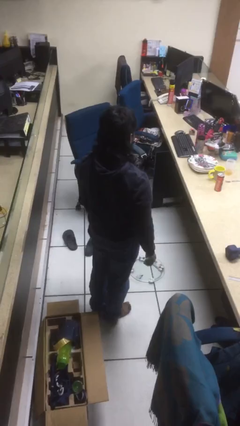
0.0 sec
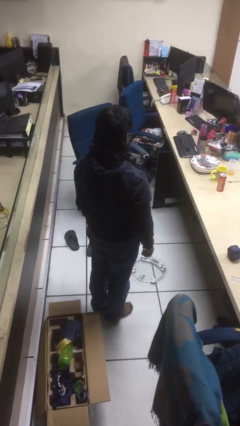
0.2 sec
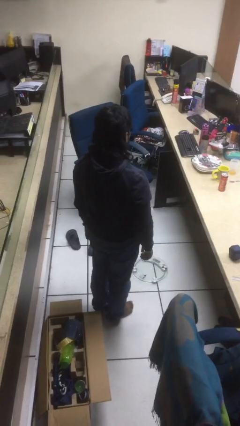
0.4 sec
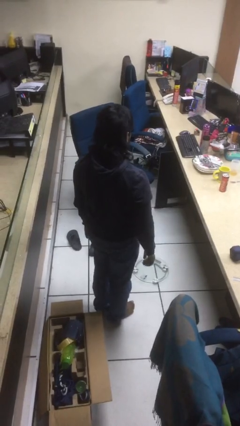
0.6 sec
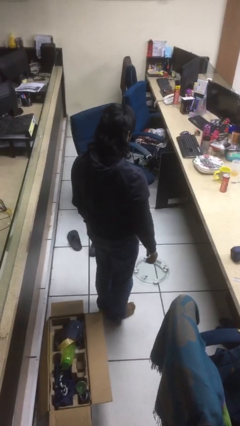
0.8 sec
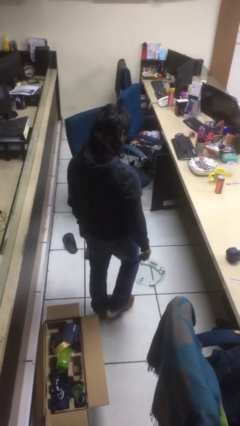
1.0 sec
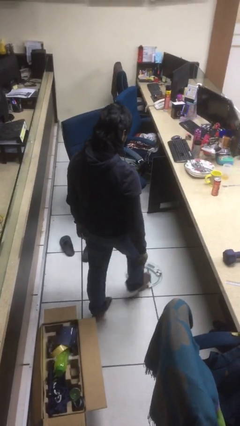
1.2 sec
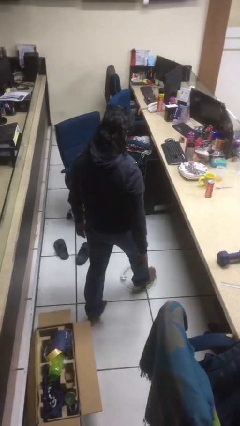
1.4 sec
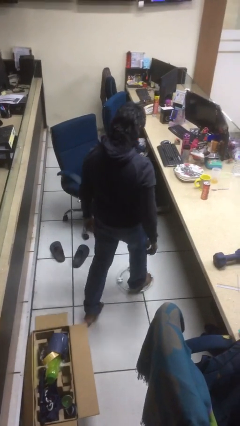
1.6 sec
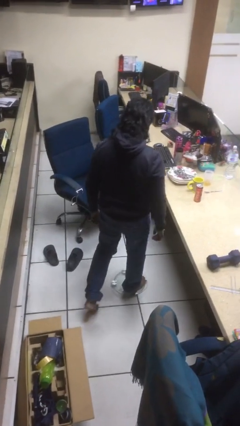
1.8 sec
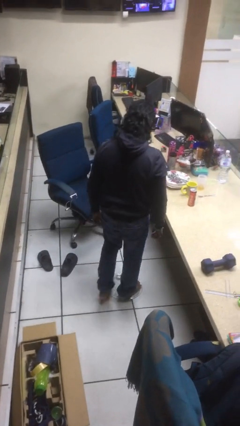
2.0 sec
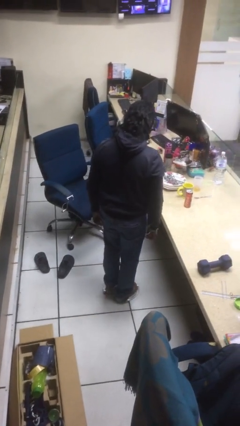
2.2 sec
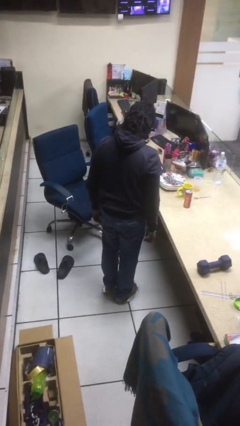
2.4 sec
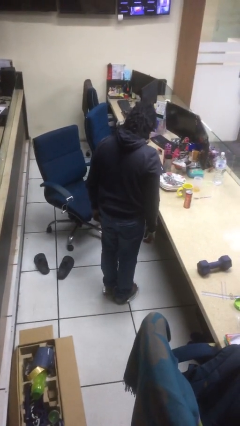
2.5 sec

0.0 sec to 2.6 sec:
person uses bodyweight scale

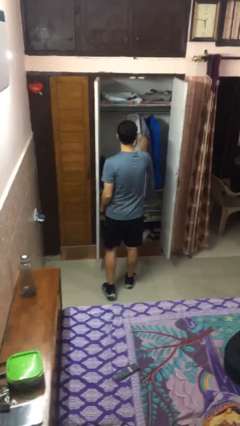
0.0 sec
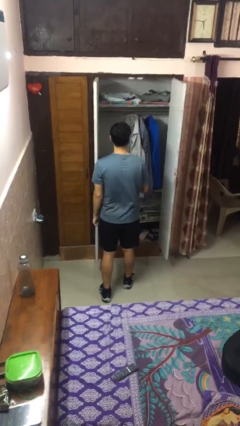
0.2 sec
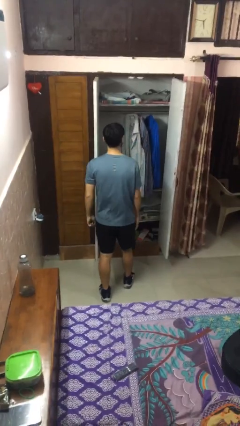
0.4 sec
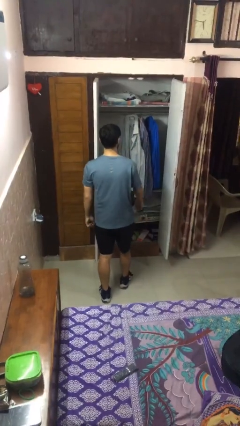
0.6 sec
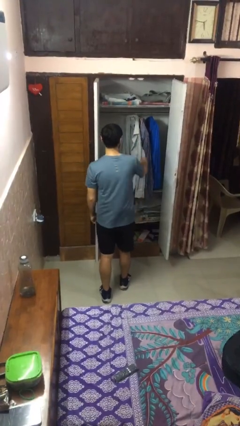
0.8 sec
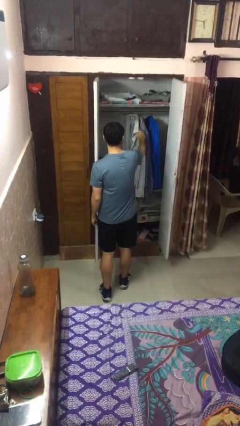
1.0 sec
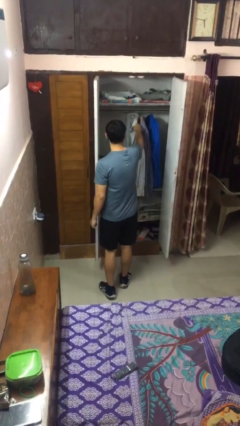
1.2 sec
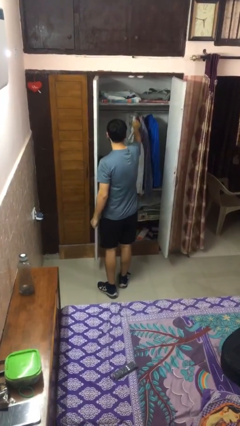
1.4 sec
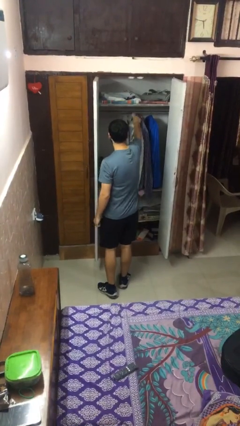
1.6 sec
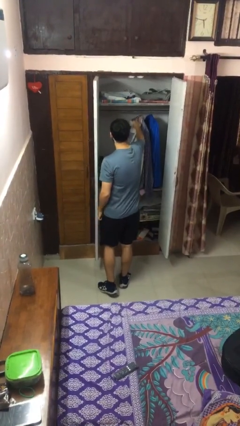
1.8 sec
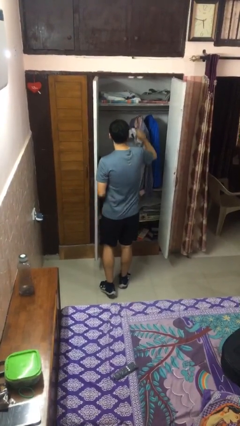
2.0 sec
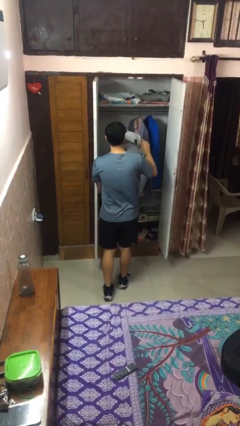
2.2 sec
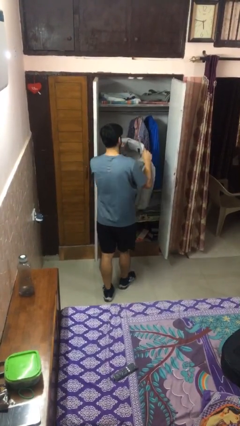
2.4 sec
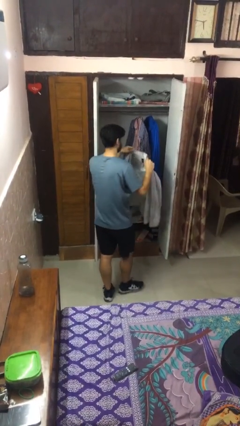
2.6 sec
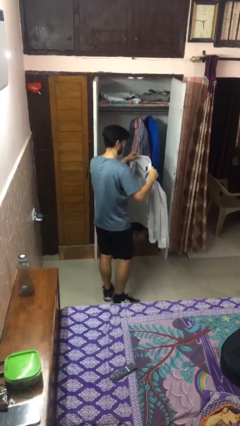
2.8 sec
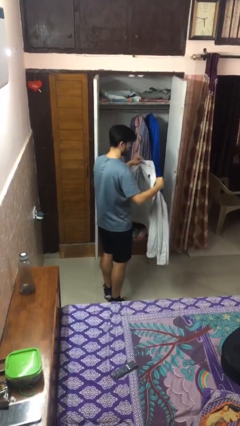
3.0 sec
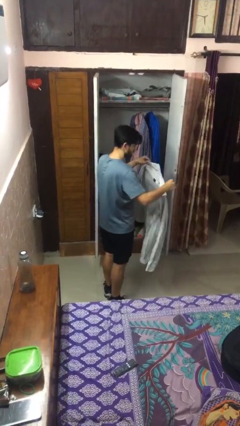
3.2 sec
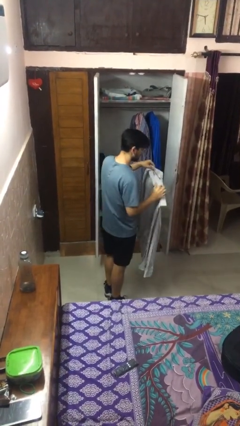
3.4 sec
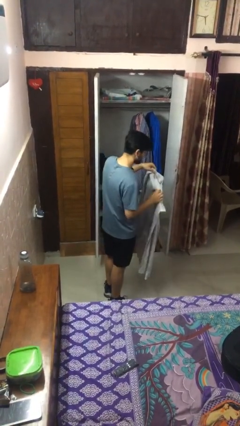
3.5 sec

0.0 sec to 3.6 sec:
person takes clothes from closet

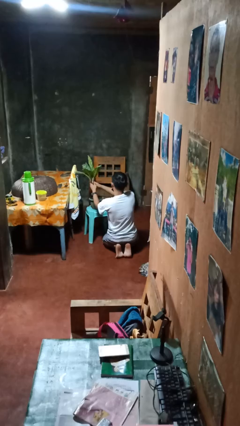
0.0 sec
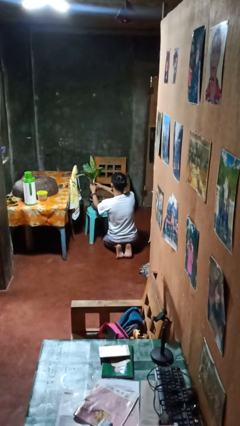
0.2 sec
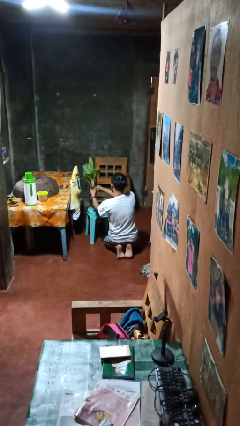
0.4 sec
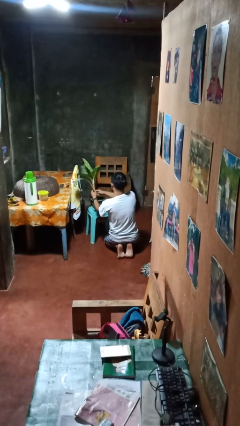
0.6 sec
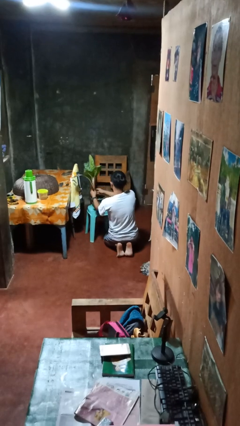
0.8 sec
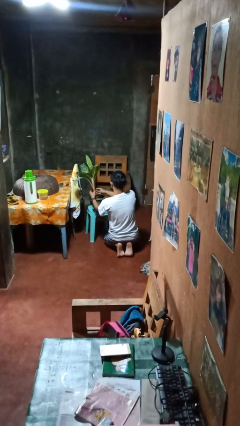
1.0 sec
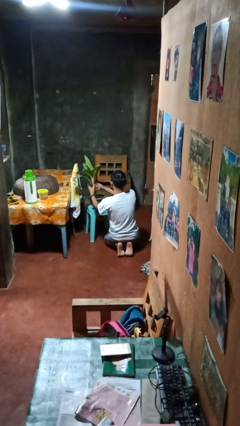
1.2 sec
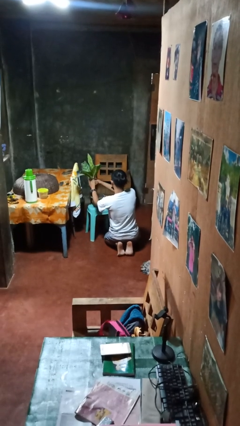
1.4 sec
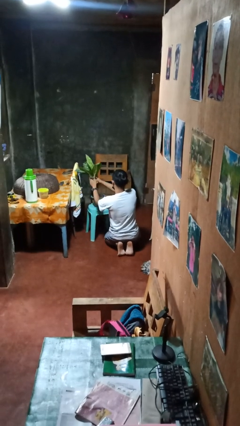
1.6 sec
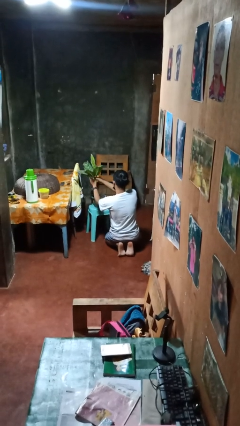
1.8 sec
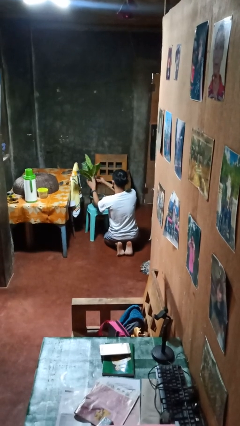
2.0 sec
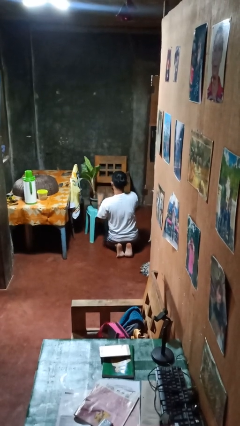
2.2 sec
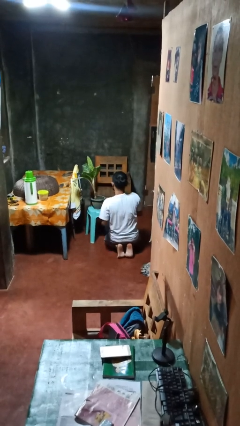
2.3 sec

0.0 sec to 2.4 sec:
person arranges flowers in vase

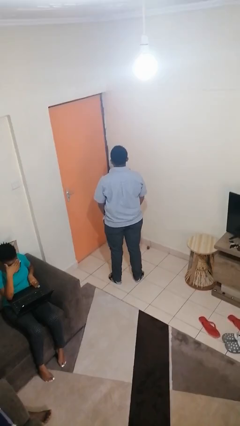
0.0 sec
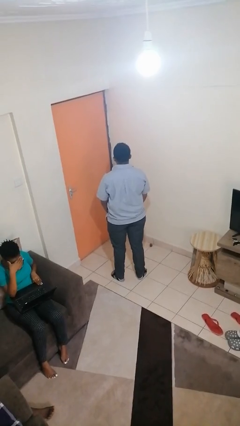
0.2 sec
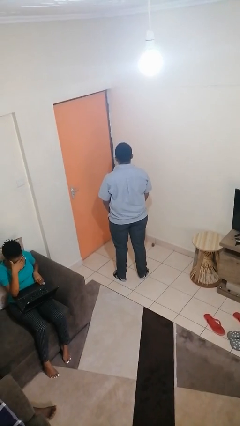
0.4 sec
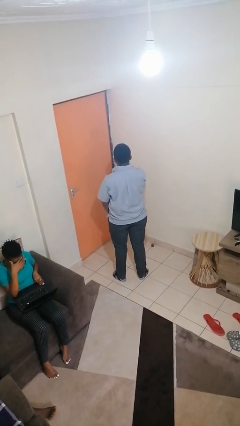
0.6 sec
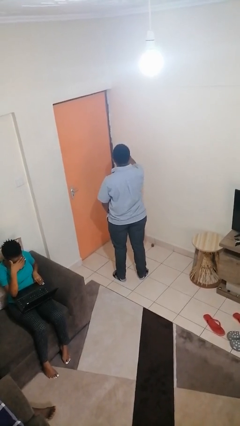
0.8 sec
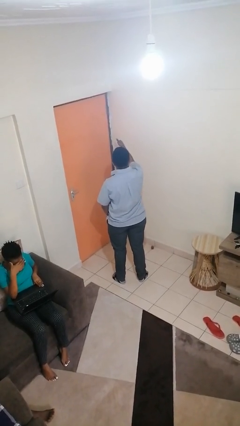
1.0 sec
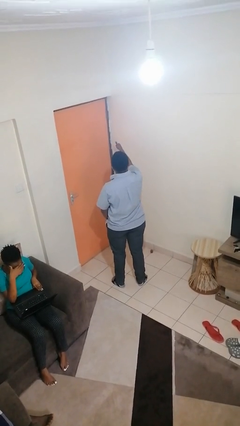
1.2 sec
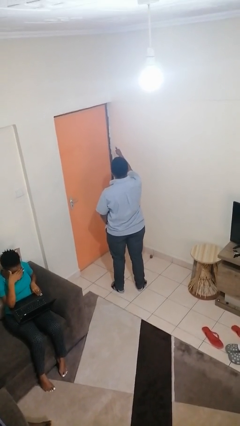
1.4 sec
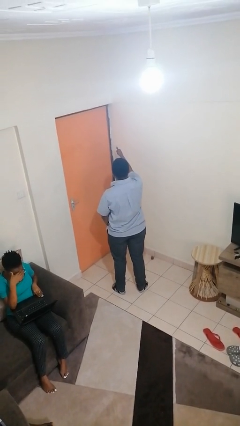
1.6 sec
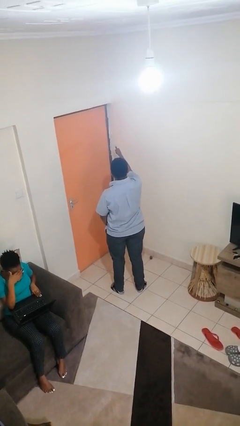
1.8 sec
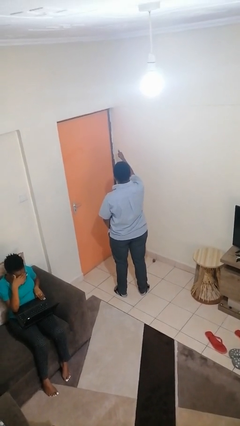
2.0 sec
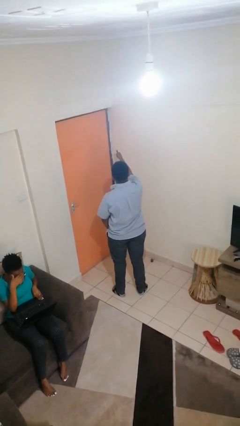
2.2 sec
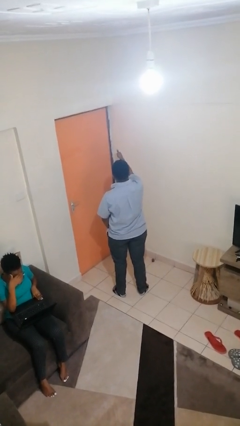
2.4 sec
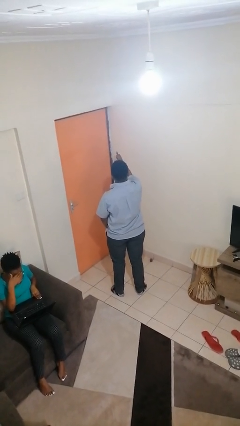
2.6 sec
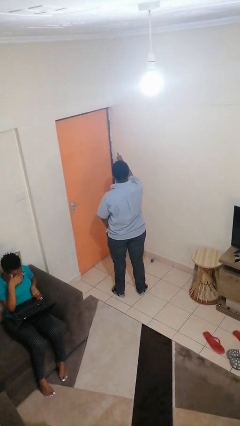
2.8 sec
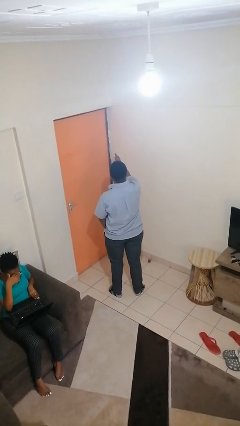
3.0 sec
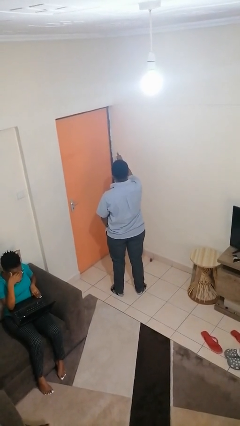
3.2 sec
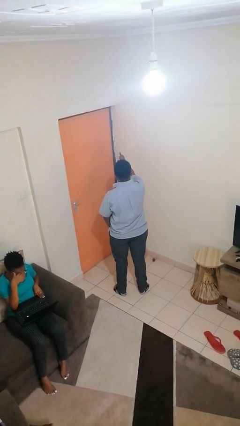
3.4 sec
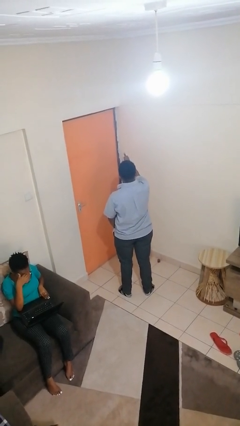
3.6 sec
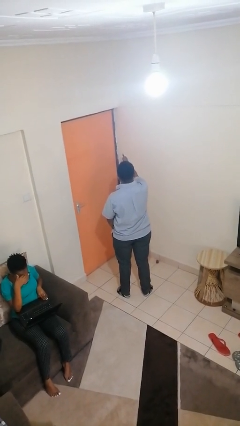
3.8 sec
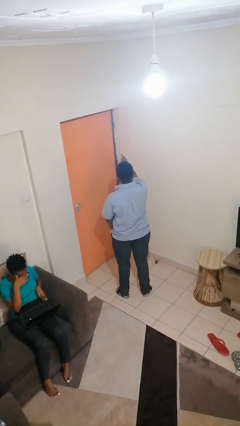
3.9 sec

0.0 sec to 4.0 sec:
person gestures thumbs up

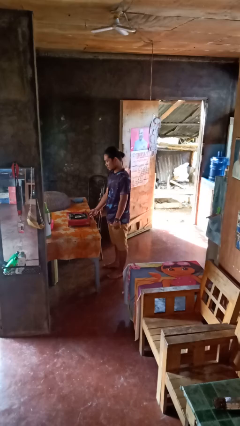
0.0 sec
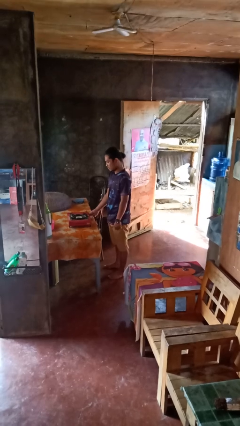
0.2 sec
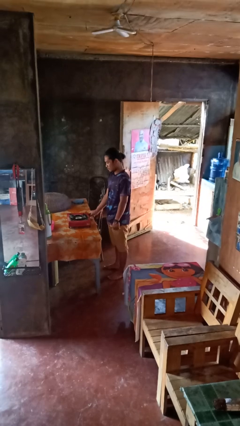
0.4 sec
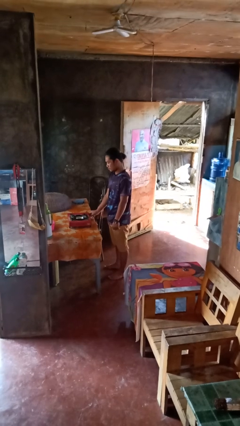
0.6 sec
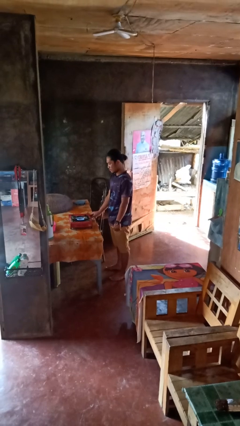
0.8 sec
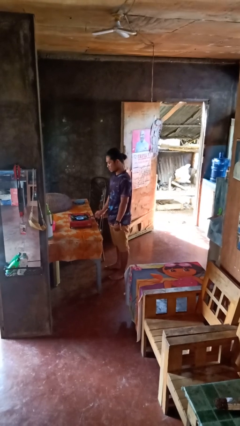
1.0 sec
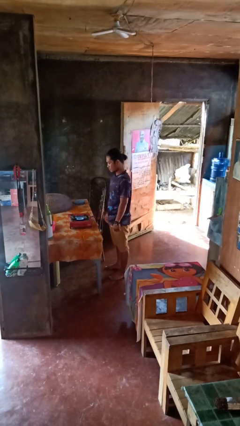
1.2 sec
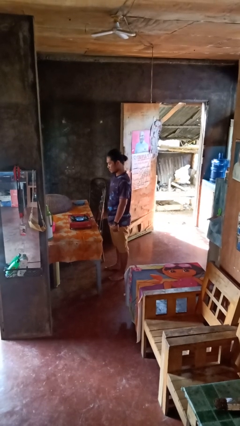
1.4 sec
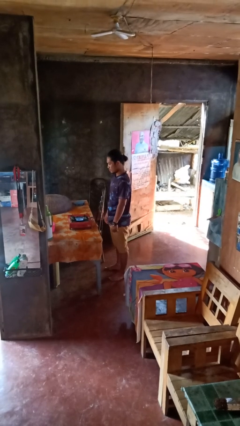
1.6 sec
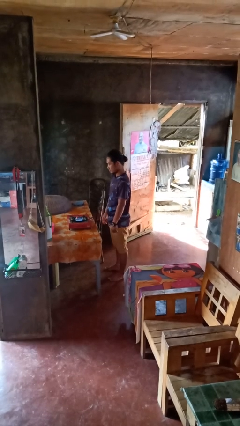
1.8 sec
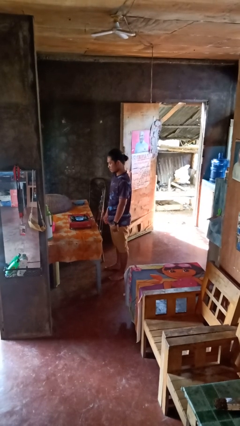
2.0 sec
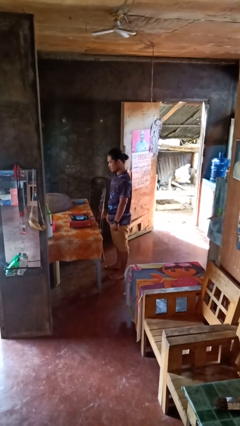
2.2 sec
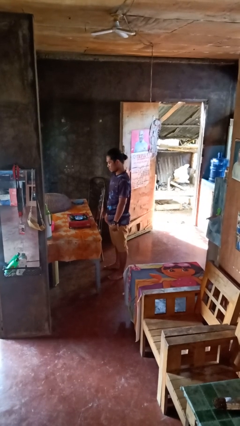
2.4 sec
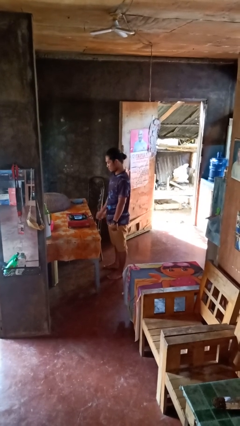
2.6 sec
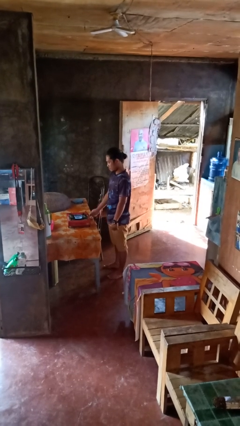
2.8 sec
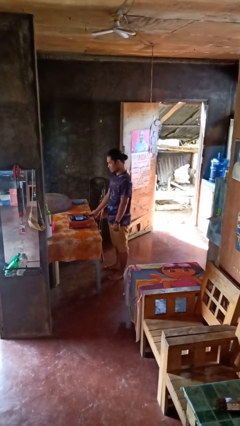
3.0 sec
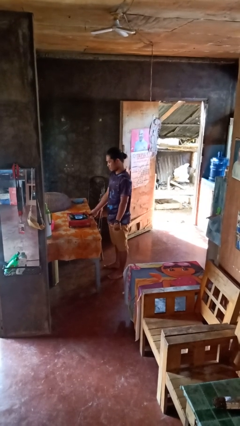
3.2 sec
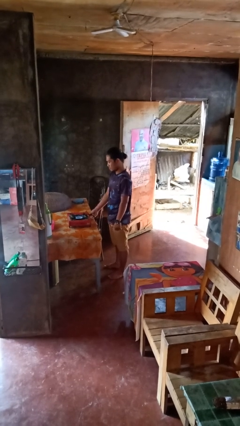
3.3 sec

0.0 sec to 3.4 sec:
person turns on stovetop

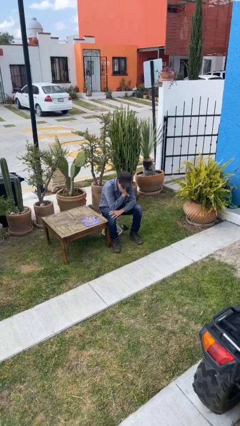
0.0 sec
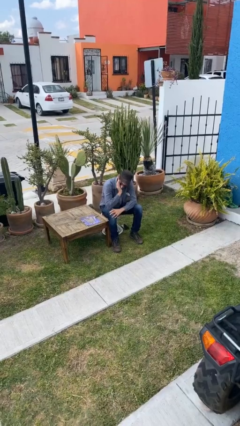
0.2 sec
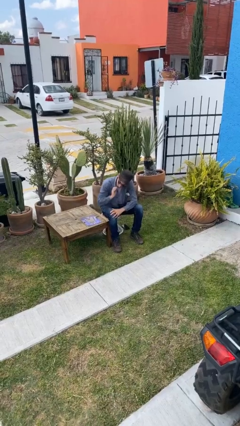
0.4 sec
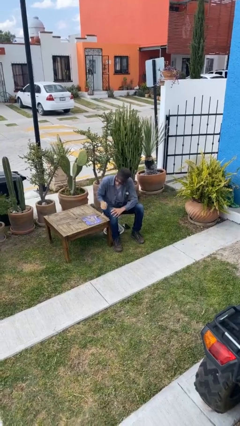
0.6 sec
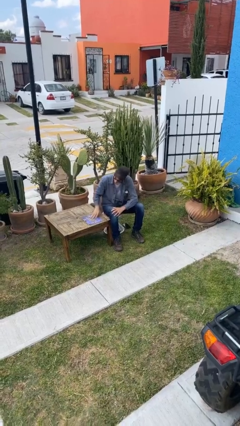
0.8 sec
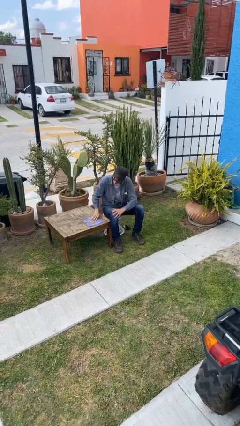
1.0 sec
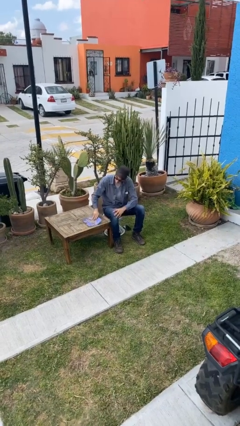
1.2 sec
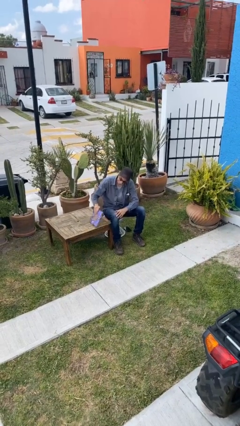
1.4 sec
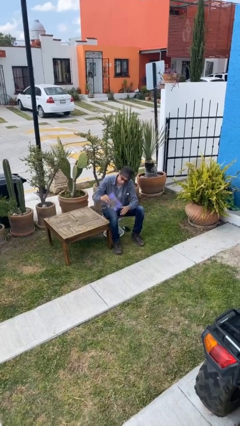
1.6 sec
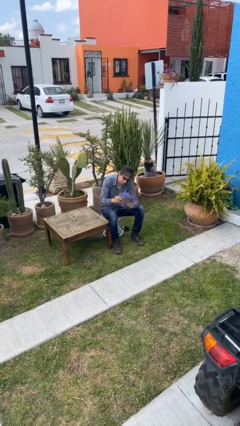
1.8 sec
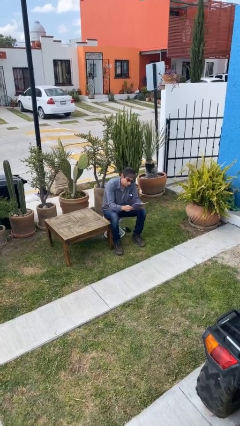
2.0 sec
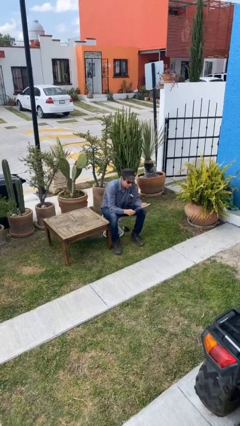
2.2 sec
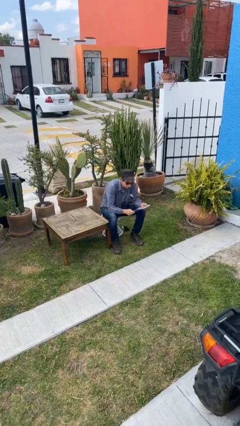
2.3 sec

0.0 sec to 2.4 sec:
person picks up object from table
